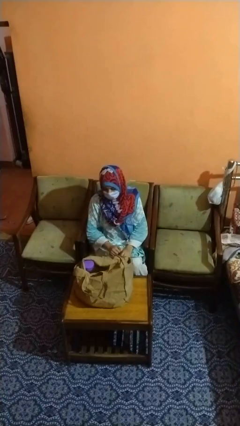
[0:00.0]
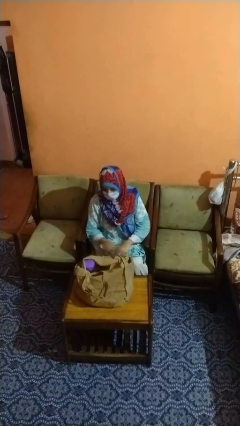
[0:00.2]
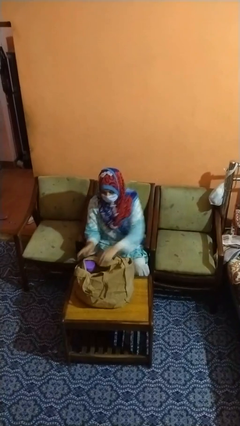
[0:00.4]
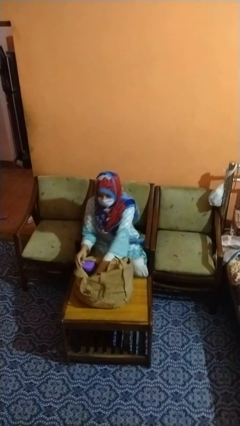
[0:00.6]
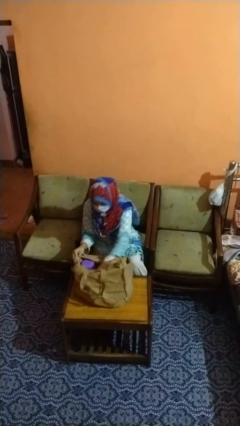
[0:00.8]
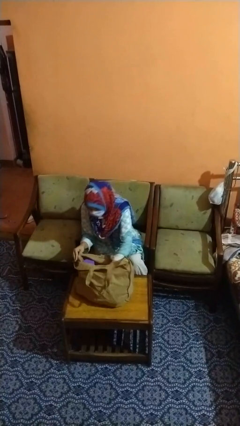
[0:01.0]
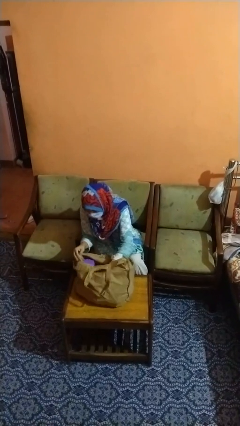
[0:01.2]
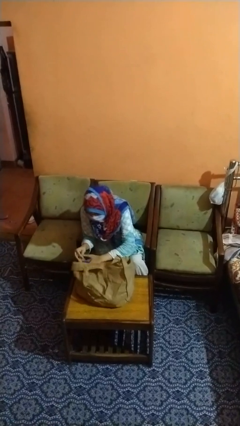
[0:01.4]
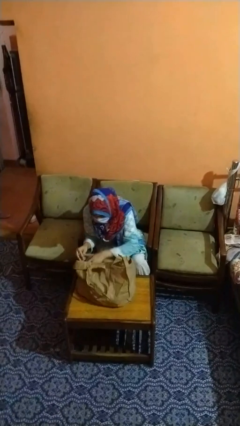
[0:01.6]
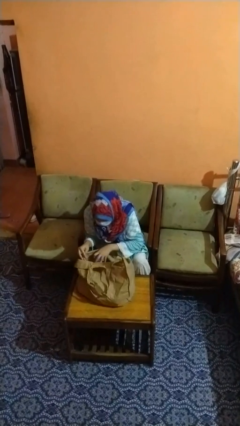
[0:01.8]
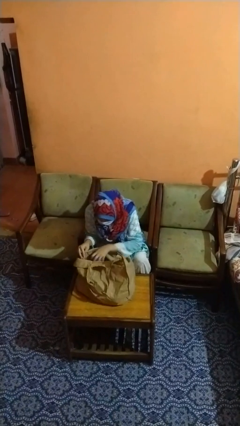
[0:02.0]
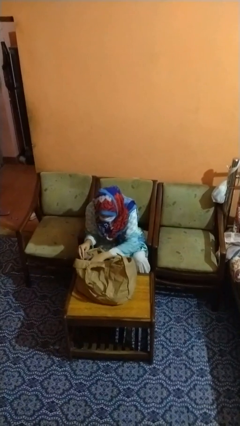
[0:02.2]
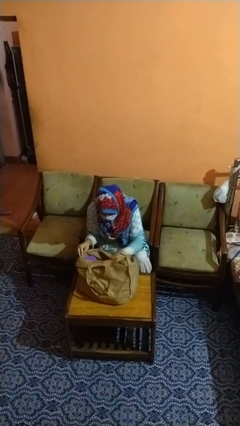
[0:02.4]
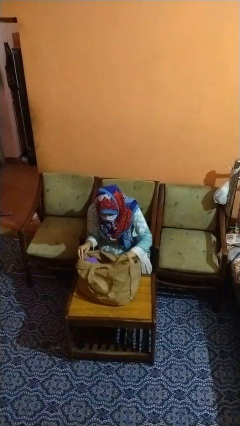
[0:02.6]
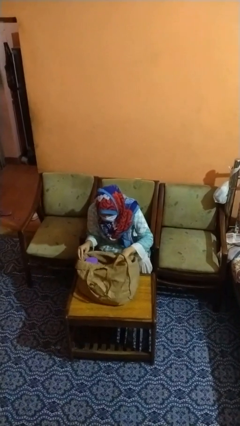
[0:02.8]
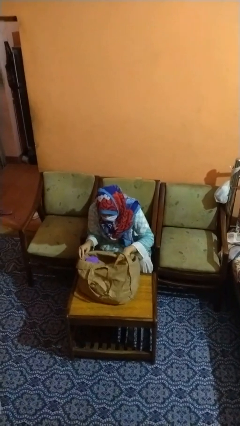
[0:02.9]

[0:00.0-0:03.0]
person searches in bag

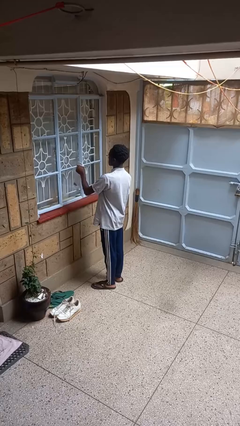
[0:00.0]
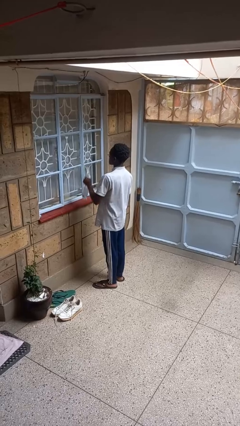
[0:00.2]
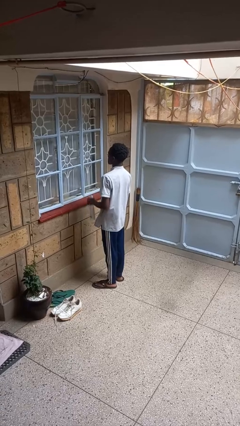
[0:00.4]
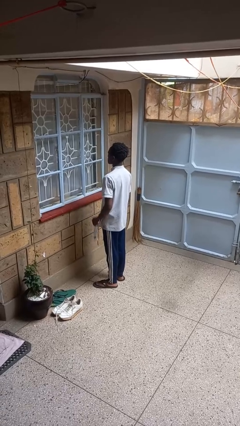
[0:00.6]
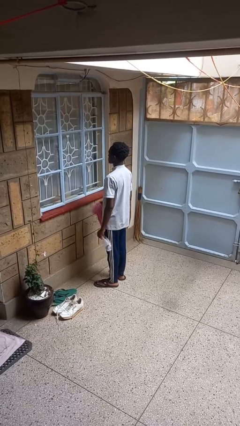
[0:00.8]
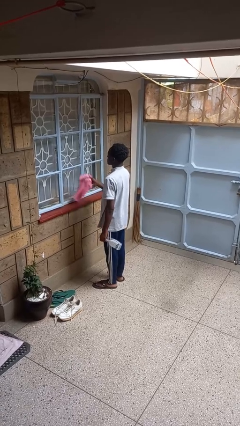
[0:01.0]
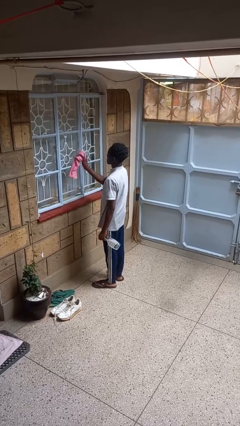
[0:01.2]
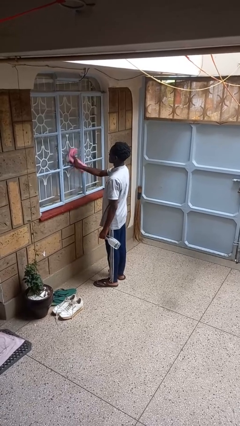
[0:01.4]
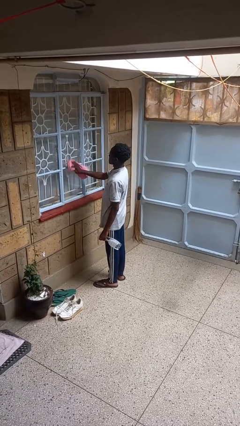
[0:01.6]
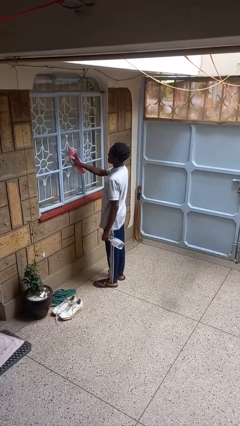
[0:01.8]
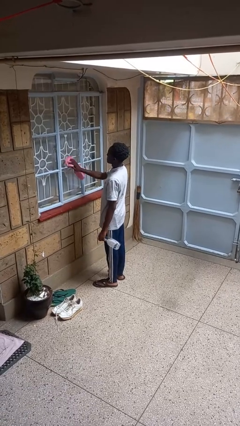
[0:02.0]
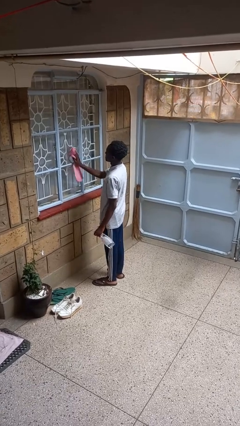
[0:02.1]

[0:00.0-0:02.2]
person washes window

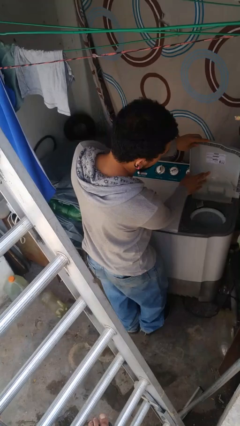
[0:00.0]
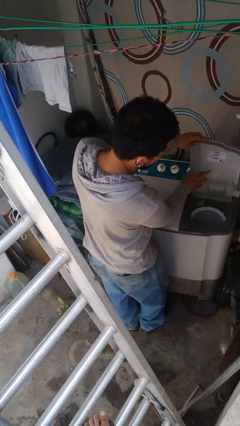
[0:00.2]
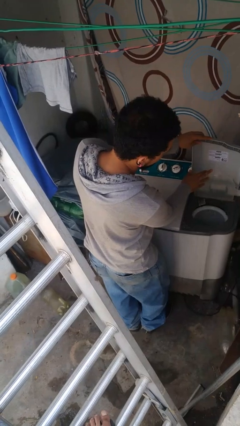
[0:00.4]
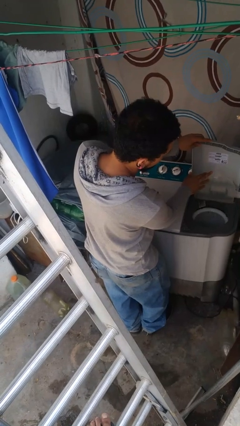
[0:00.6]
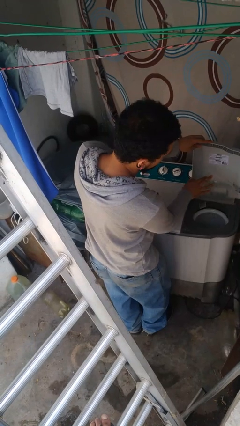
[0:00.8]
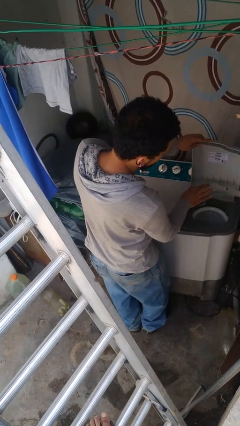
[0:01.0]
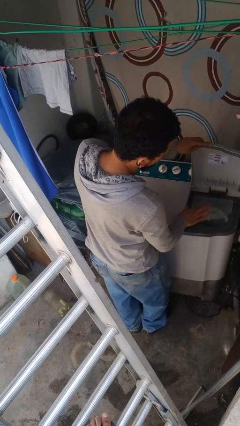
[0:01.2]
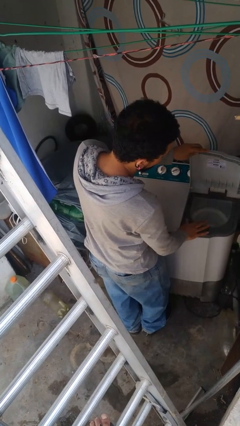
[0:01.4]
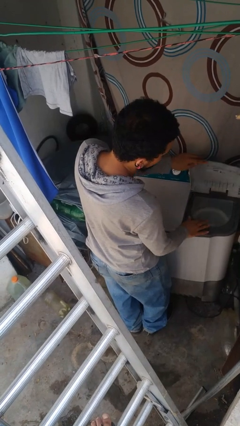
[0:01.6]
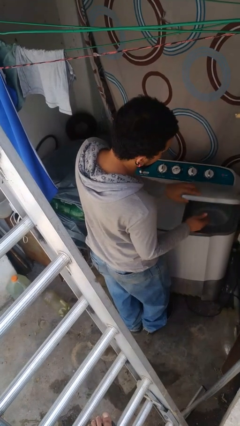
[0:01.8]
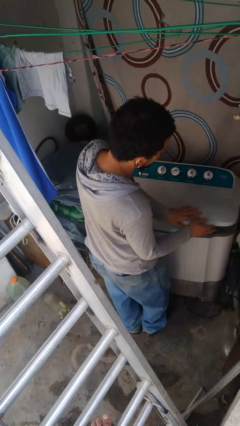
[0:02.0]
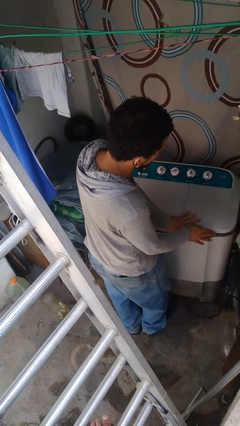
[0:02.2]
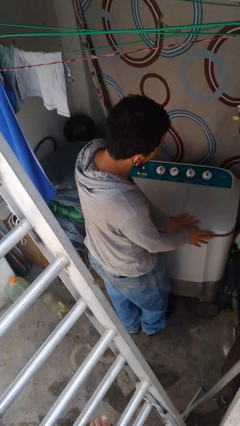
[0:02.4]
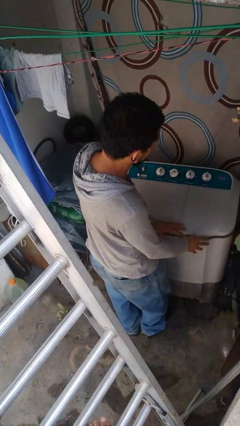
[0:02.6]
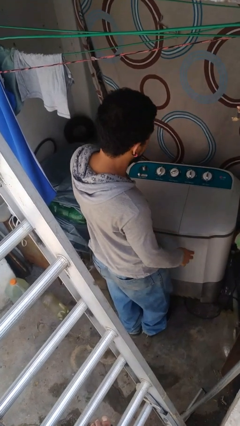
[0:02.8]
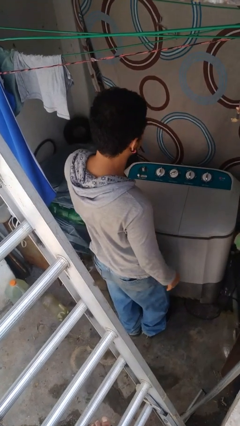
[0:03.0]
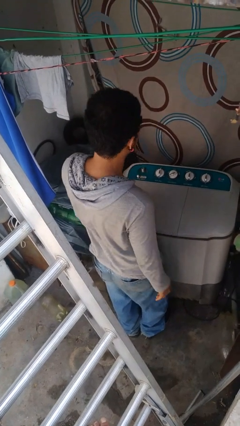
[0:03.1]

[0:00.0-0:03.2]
person closes clothes washer

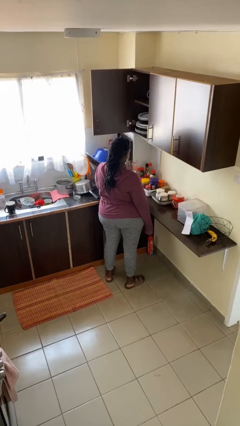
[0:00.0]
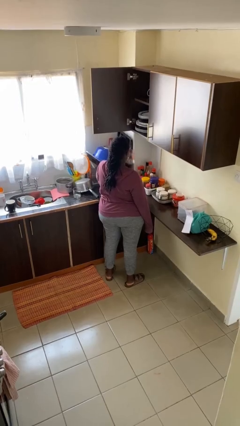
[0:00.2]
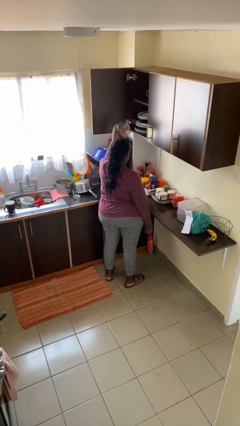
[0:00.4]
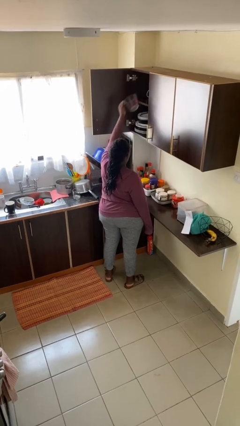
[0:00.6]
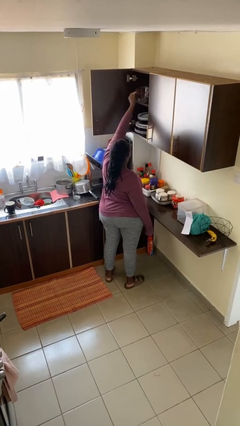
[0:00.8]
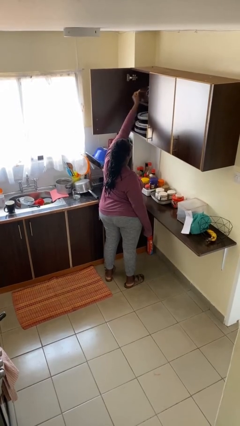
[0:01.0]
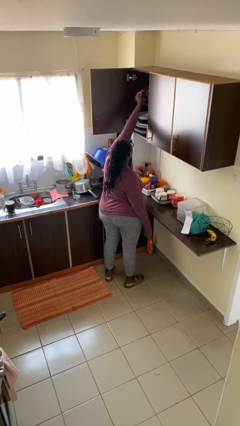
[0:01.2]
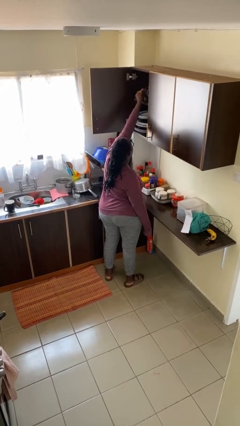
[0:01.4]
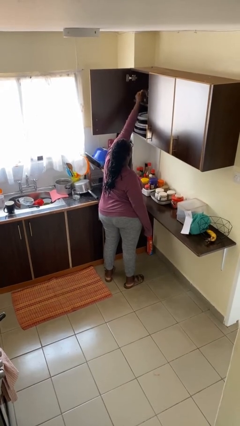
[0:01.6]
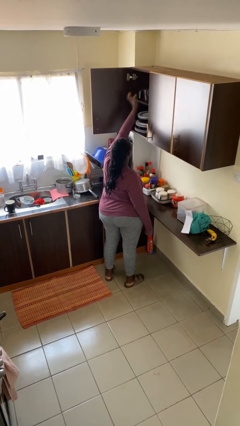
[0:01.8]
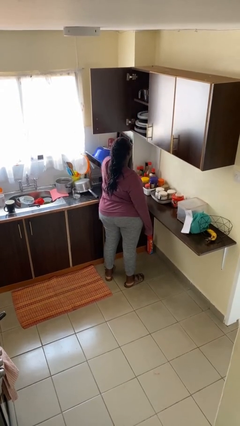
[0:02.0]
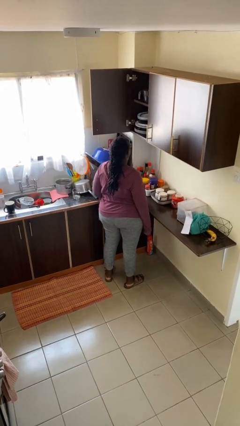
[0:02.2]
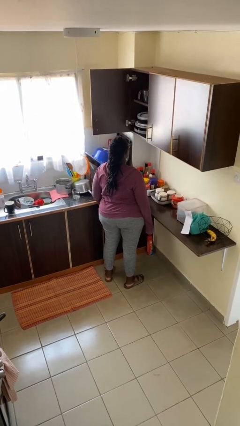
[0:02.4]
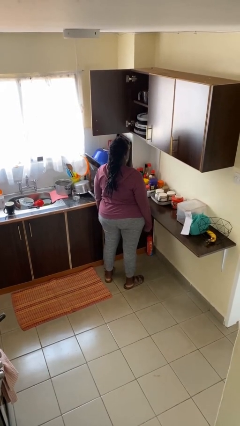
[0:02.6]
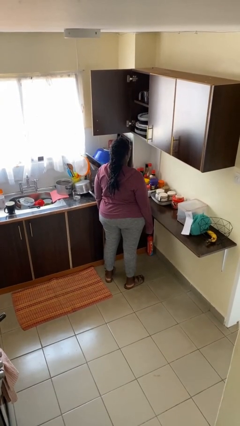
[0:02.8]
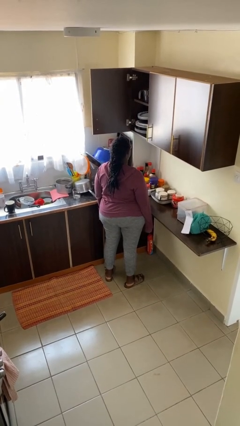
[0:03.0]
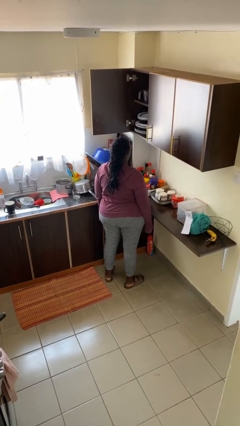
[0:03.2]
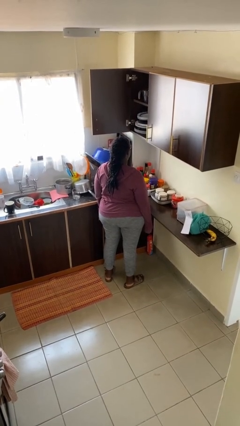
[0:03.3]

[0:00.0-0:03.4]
person puts down object into cabinet

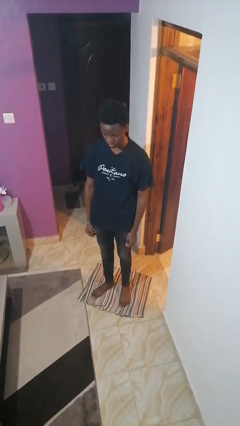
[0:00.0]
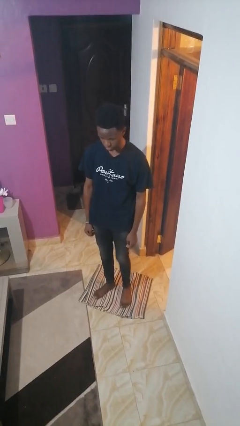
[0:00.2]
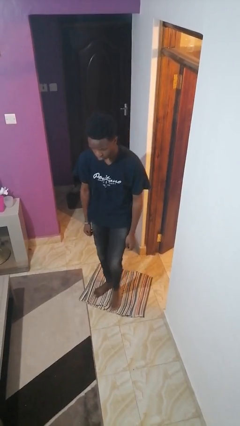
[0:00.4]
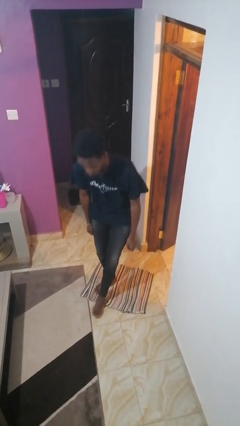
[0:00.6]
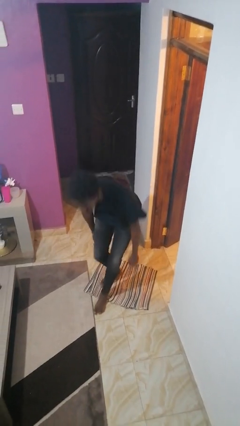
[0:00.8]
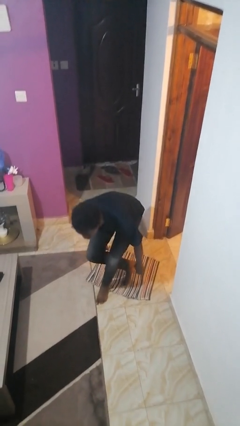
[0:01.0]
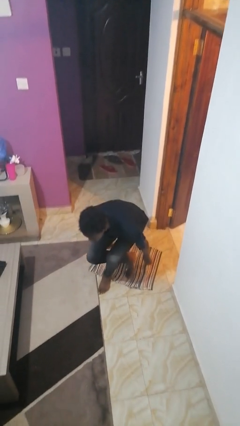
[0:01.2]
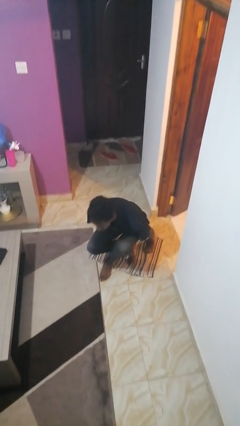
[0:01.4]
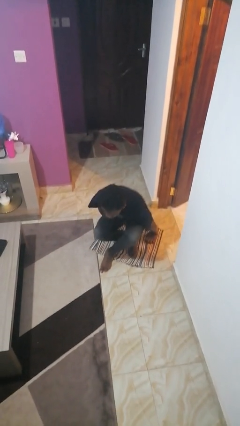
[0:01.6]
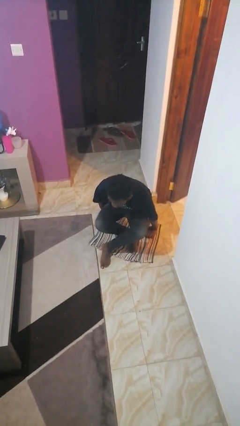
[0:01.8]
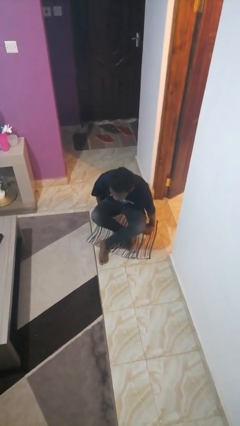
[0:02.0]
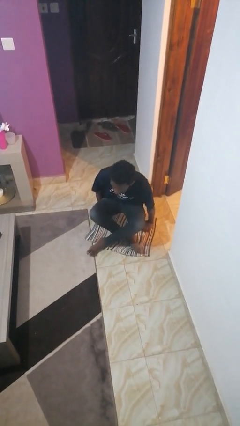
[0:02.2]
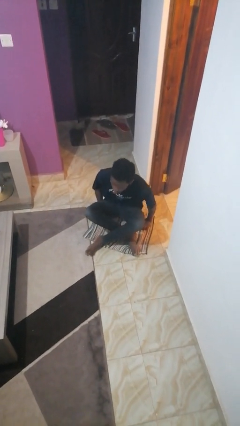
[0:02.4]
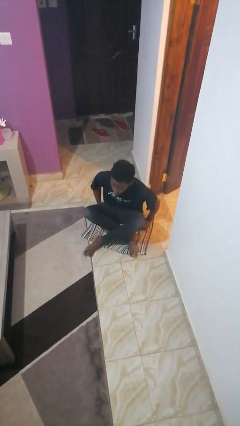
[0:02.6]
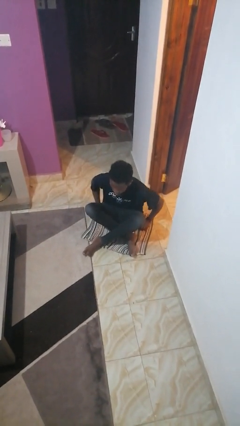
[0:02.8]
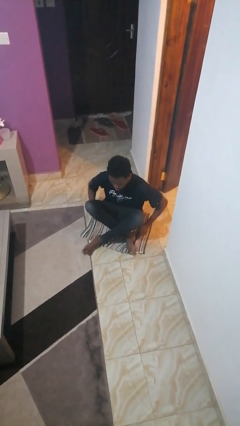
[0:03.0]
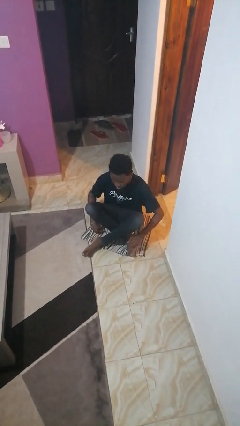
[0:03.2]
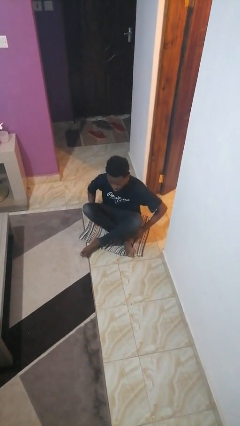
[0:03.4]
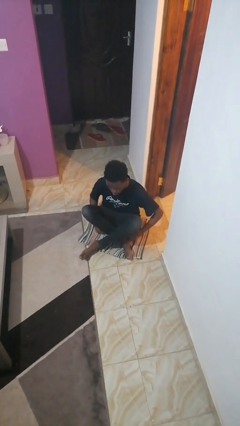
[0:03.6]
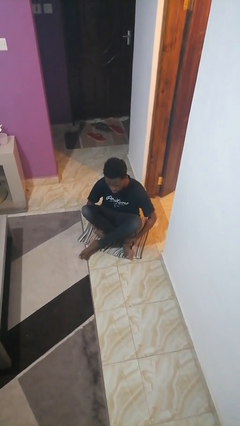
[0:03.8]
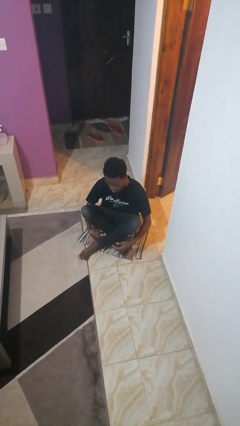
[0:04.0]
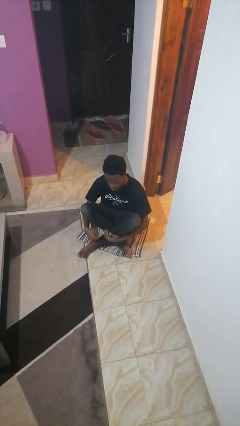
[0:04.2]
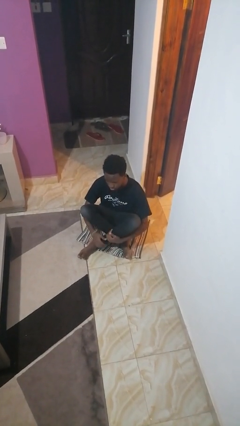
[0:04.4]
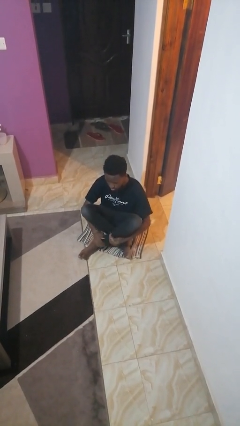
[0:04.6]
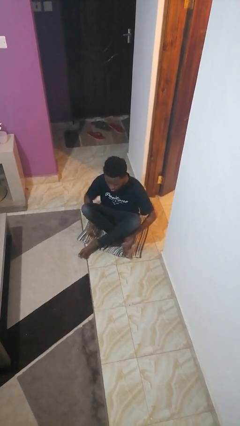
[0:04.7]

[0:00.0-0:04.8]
person sits crisscross

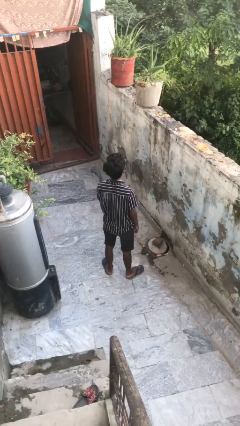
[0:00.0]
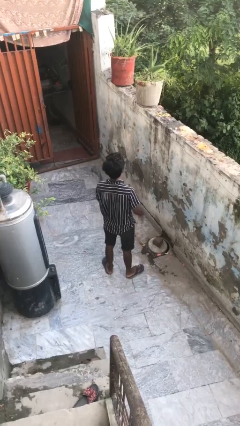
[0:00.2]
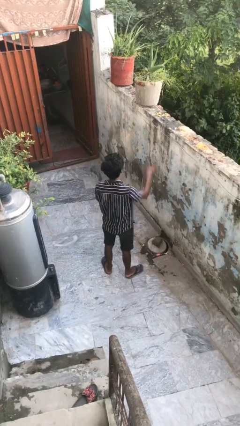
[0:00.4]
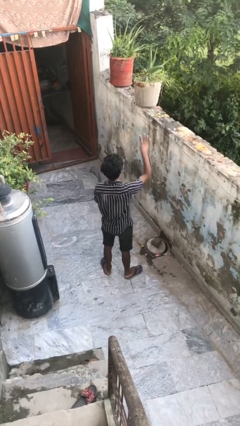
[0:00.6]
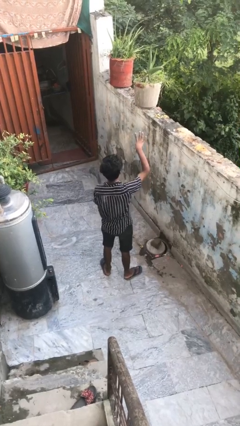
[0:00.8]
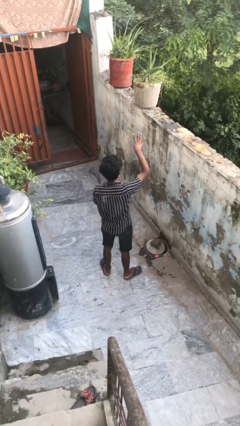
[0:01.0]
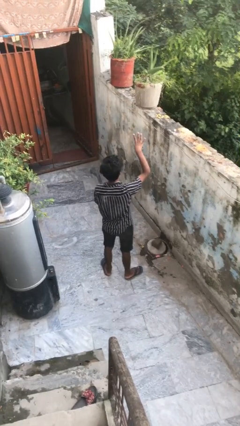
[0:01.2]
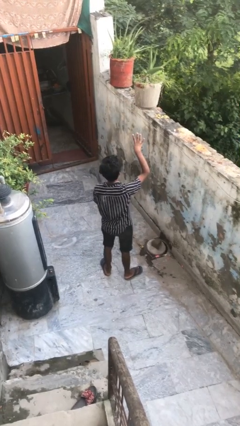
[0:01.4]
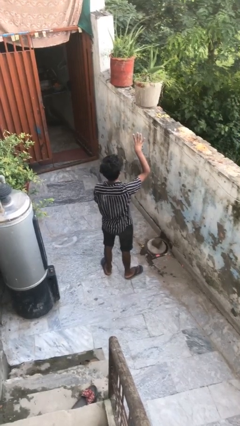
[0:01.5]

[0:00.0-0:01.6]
person gestures number four
